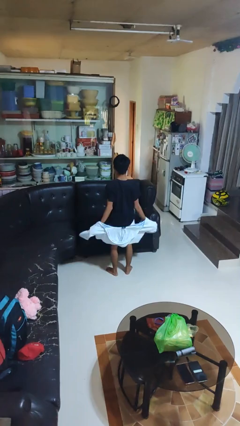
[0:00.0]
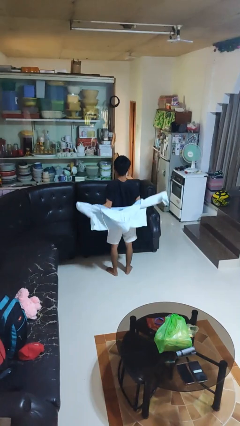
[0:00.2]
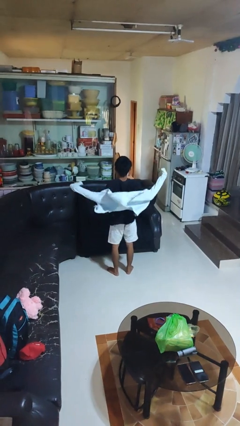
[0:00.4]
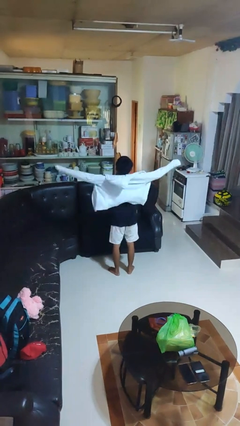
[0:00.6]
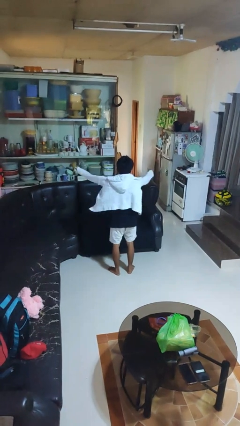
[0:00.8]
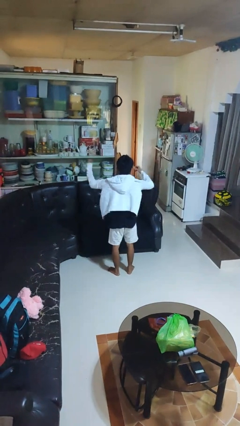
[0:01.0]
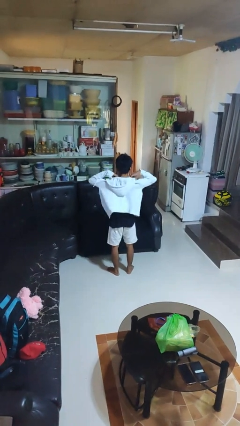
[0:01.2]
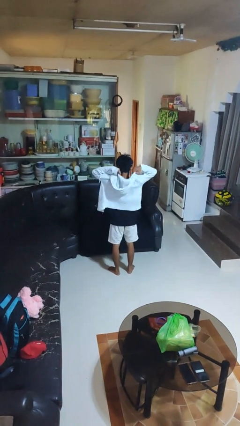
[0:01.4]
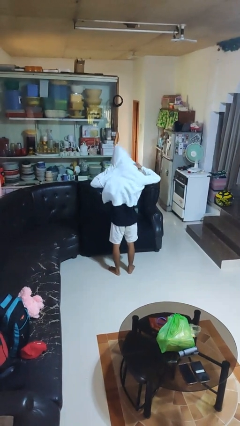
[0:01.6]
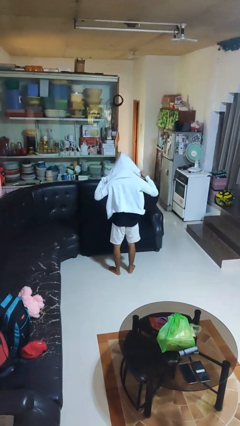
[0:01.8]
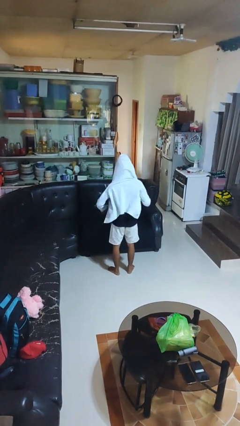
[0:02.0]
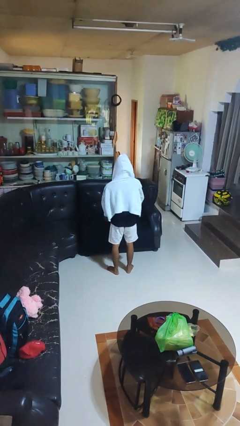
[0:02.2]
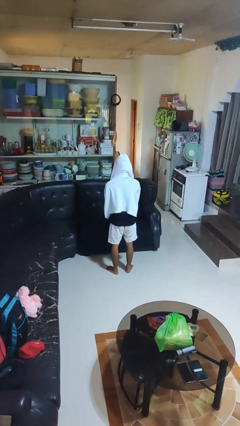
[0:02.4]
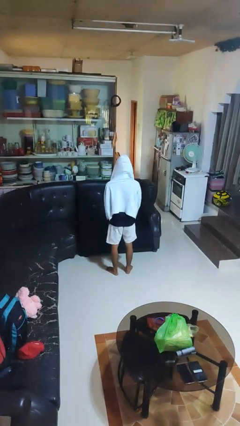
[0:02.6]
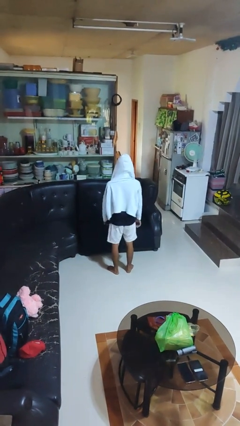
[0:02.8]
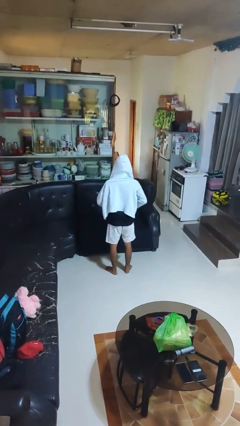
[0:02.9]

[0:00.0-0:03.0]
person puts on hoodie

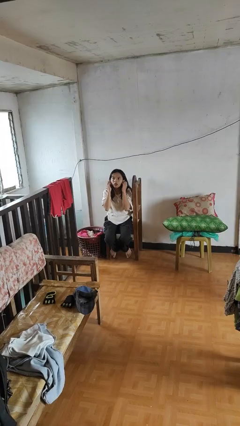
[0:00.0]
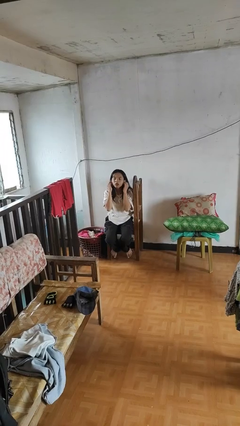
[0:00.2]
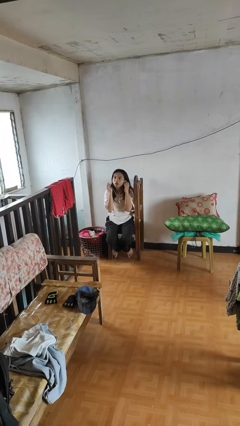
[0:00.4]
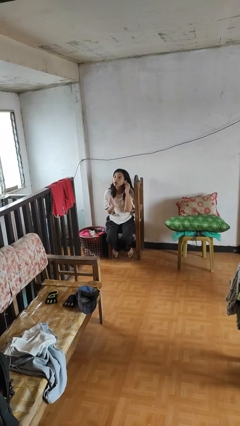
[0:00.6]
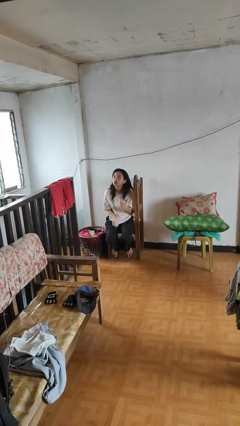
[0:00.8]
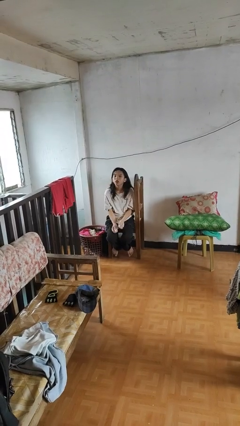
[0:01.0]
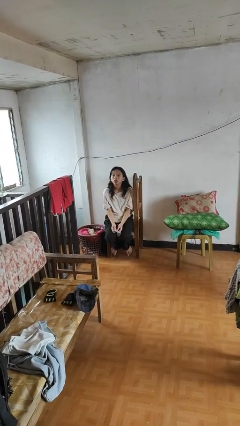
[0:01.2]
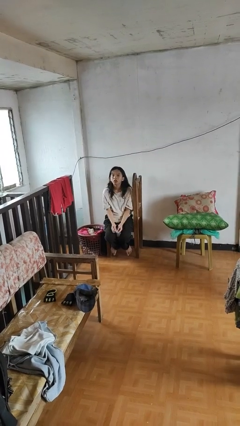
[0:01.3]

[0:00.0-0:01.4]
person takes off headphones

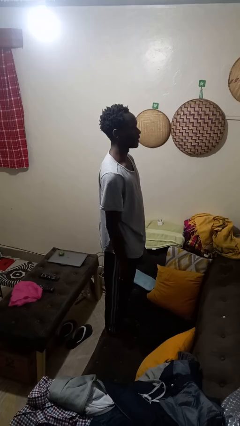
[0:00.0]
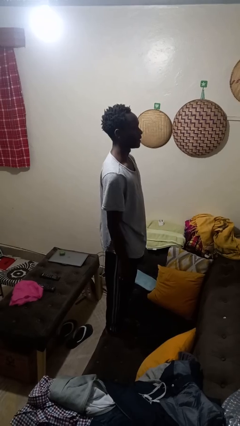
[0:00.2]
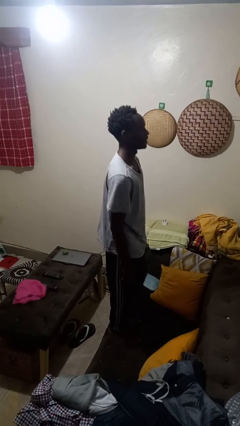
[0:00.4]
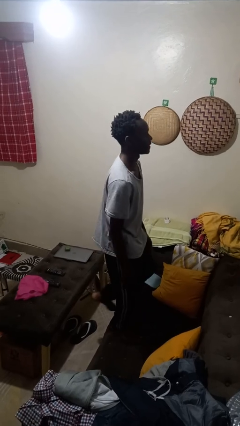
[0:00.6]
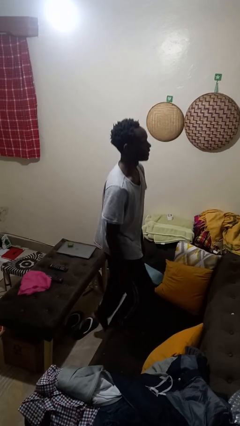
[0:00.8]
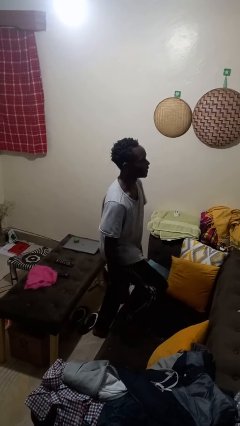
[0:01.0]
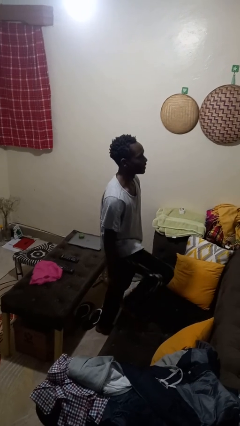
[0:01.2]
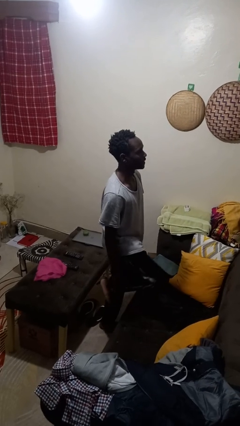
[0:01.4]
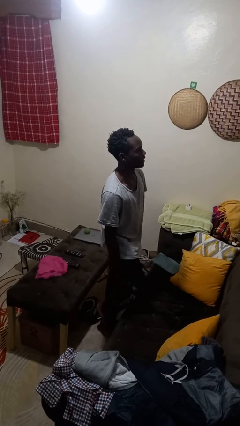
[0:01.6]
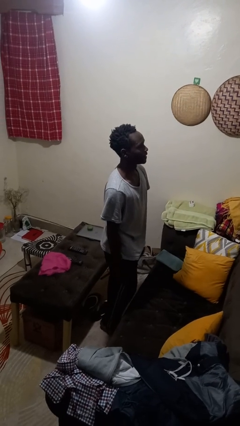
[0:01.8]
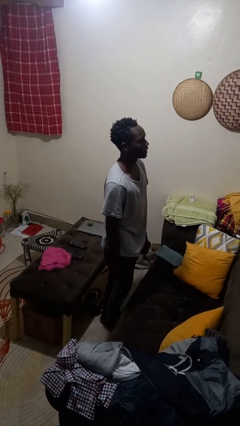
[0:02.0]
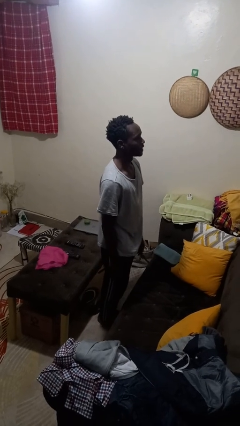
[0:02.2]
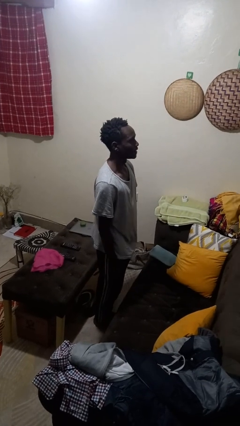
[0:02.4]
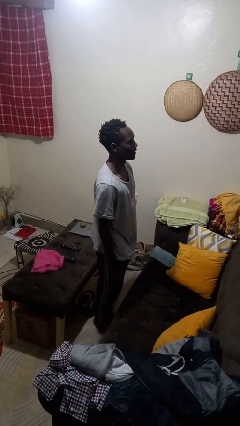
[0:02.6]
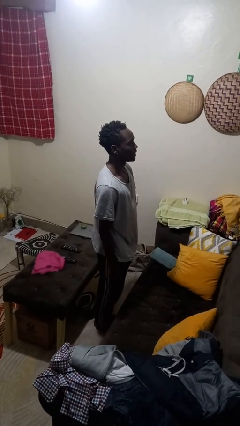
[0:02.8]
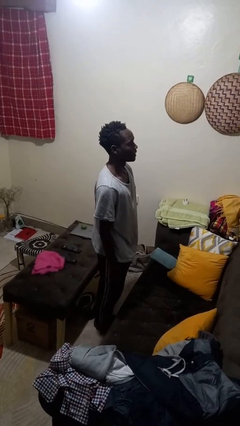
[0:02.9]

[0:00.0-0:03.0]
person climbs off couch

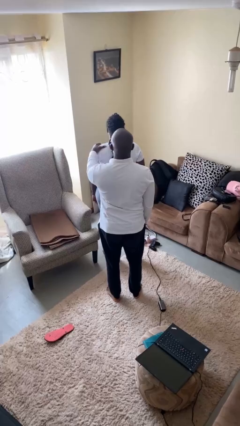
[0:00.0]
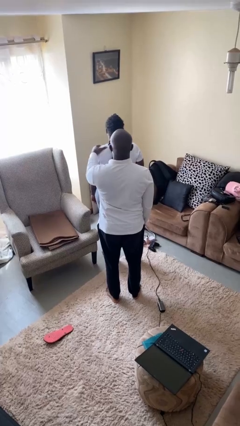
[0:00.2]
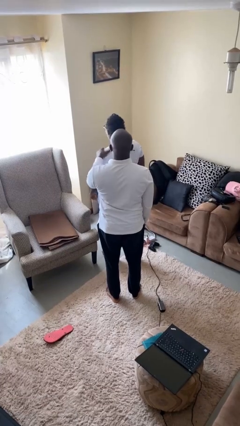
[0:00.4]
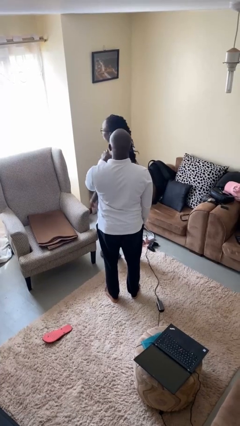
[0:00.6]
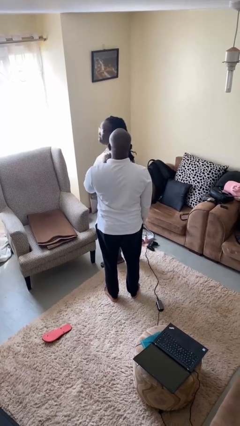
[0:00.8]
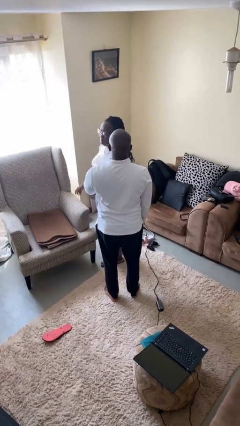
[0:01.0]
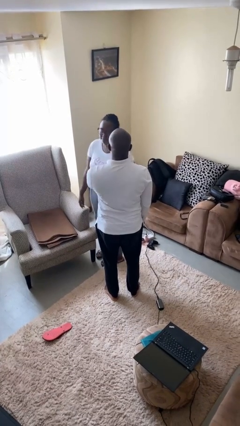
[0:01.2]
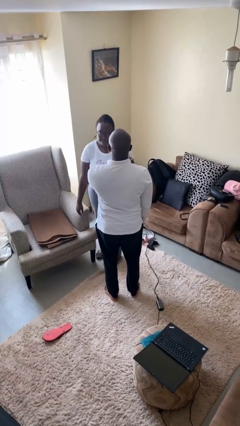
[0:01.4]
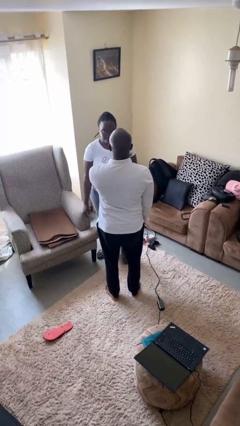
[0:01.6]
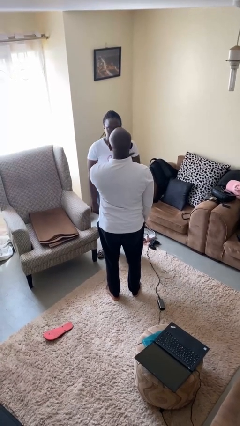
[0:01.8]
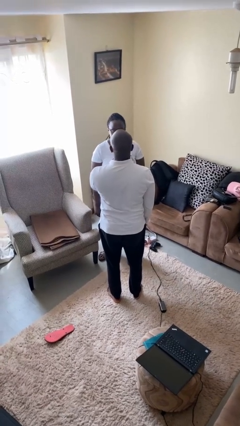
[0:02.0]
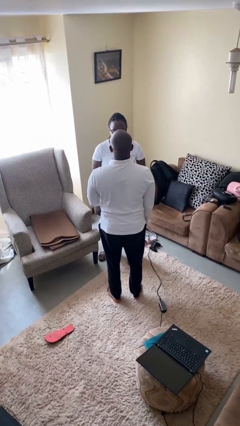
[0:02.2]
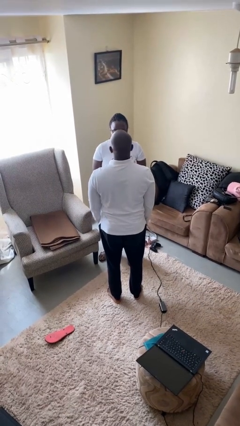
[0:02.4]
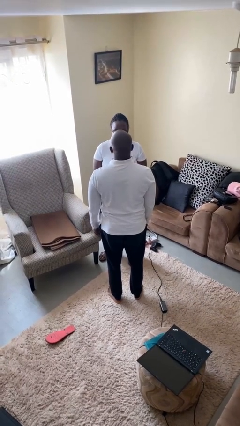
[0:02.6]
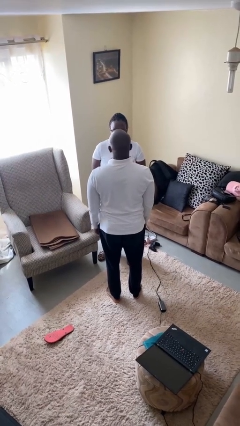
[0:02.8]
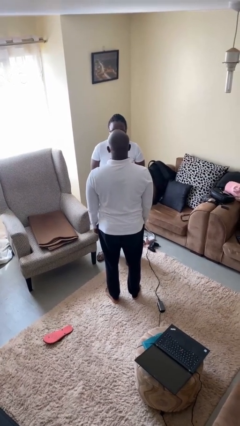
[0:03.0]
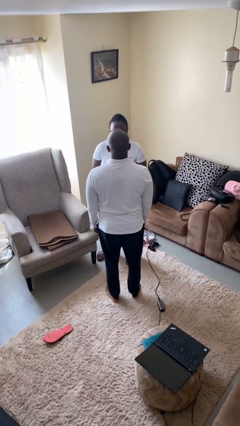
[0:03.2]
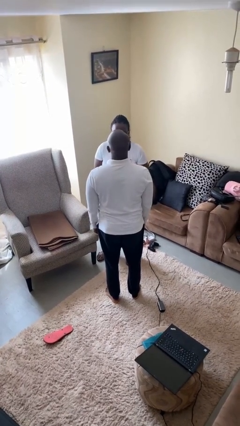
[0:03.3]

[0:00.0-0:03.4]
person spins person around

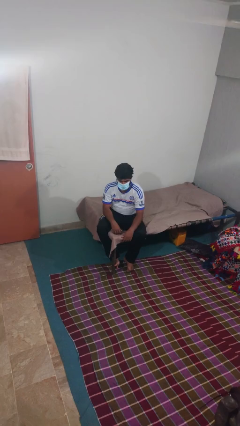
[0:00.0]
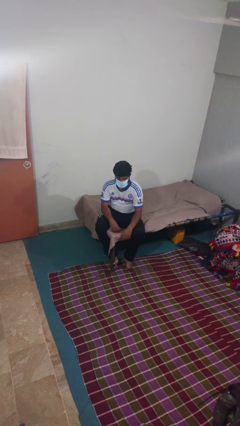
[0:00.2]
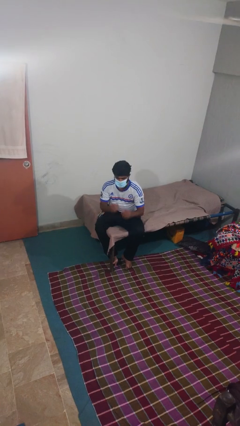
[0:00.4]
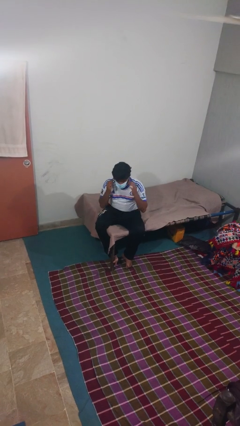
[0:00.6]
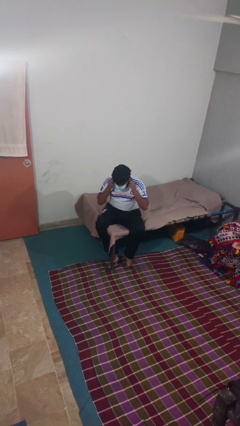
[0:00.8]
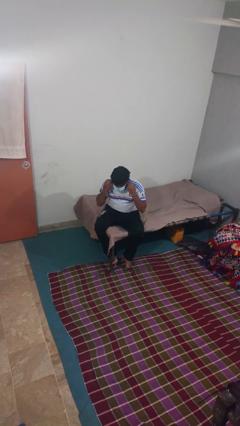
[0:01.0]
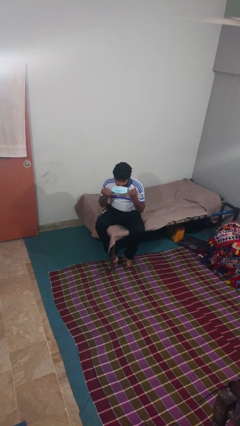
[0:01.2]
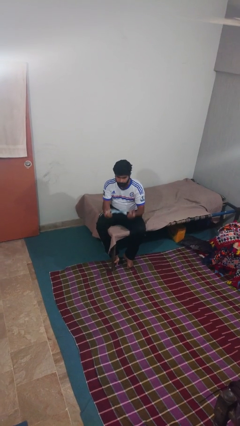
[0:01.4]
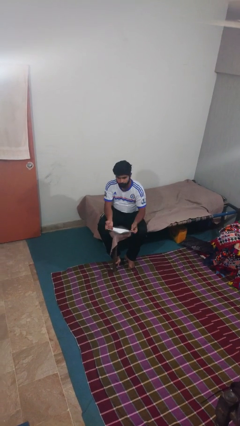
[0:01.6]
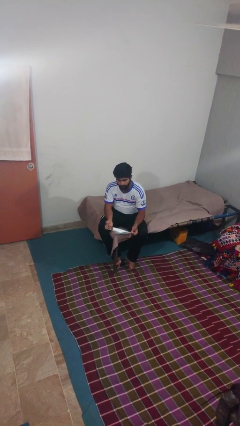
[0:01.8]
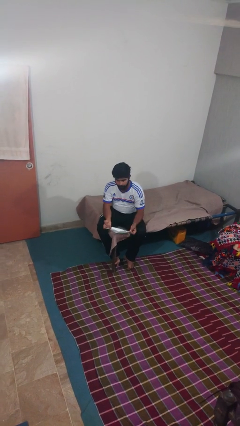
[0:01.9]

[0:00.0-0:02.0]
person takes off facemask

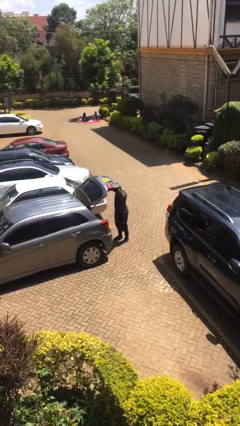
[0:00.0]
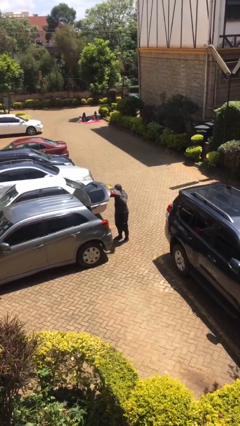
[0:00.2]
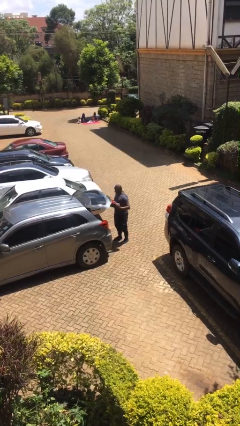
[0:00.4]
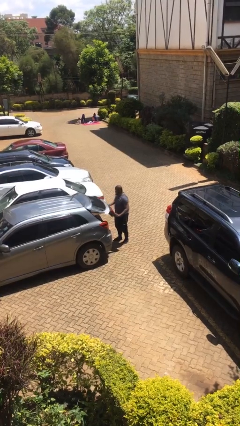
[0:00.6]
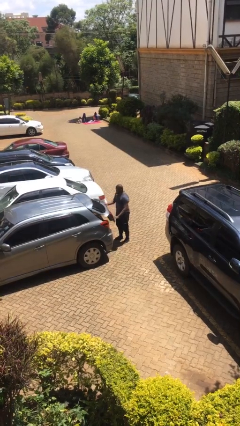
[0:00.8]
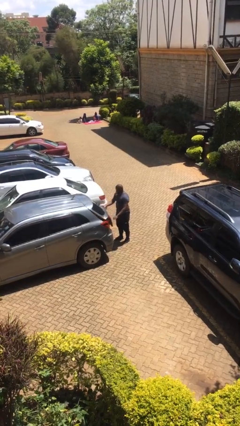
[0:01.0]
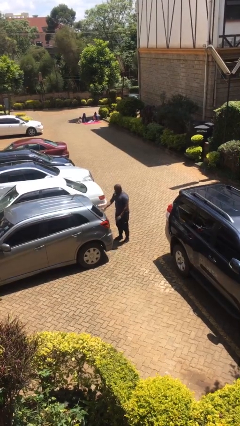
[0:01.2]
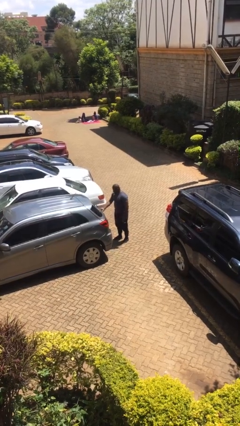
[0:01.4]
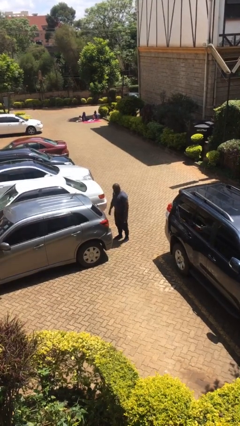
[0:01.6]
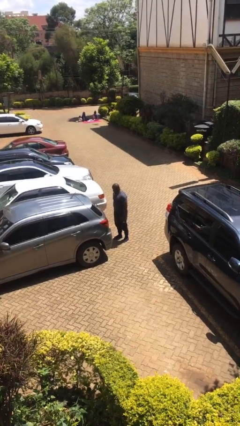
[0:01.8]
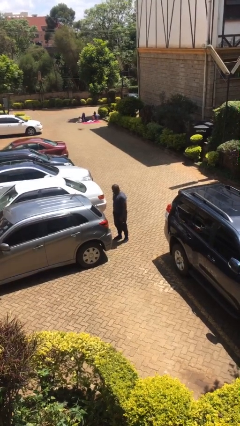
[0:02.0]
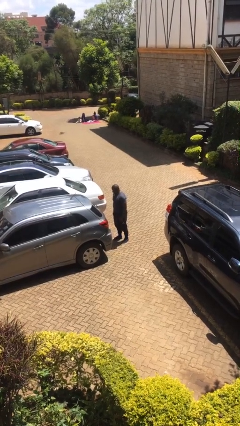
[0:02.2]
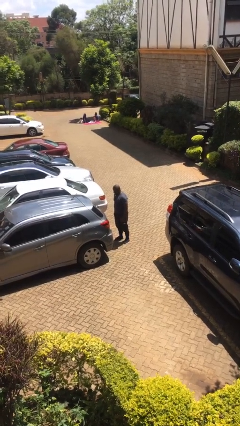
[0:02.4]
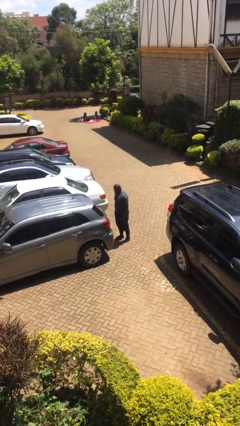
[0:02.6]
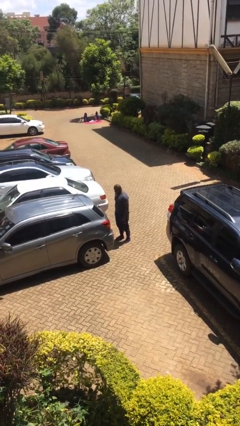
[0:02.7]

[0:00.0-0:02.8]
person closes car trunk

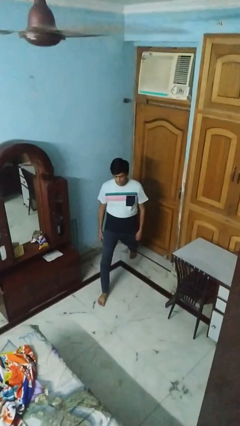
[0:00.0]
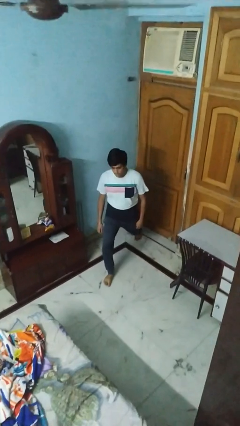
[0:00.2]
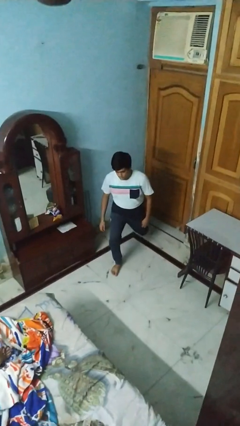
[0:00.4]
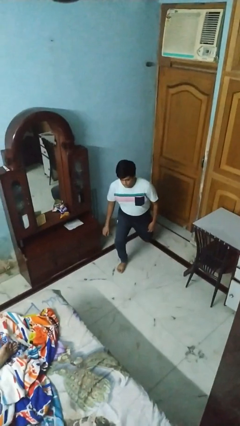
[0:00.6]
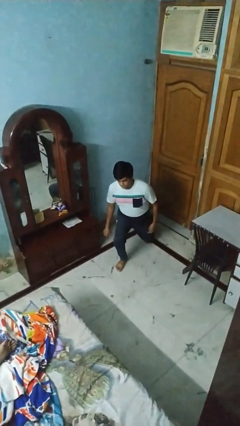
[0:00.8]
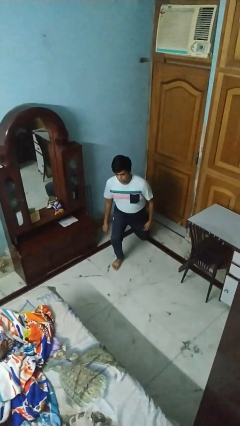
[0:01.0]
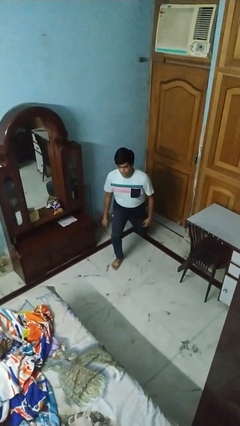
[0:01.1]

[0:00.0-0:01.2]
person exercises with lunges
